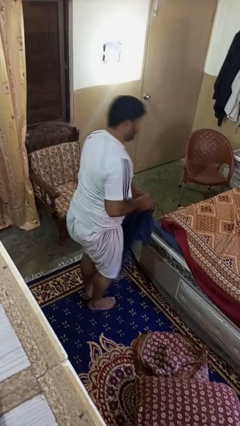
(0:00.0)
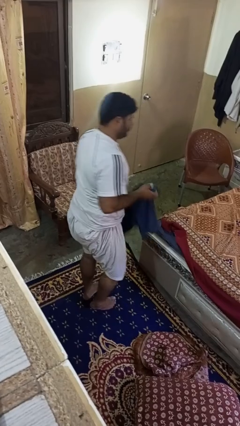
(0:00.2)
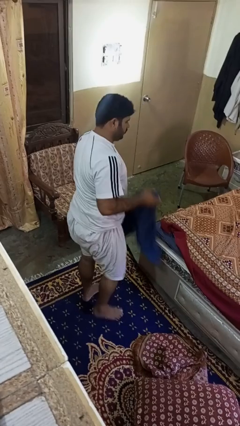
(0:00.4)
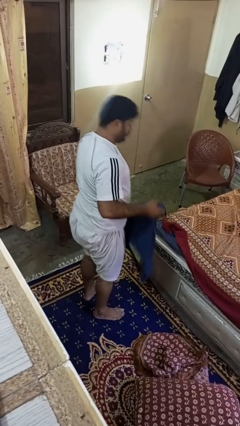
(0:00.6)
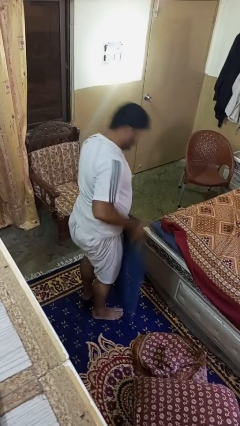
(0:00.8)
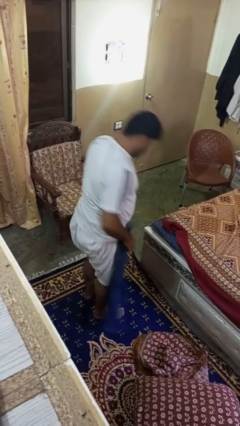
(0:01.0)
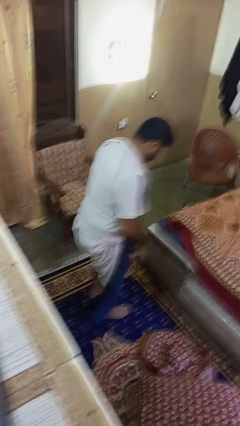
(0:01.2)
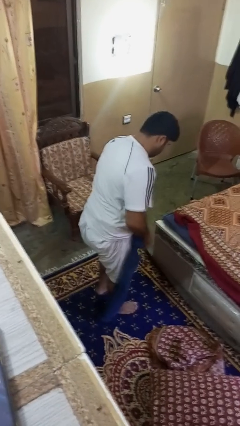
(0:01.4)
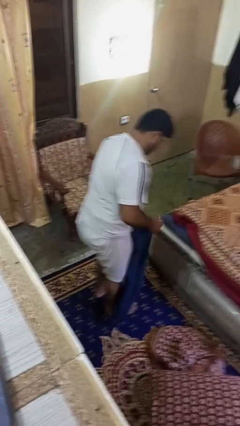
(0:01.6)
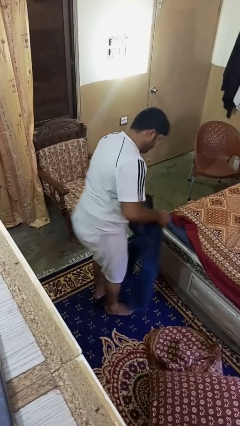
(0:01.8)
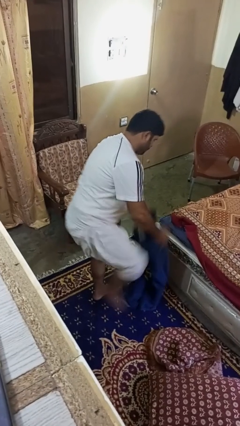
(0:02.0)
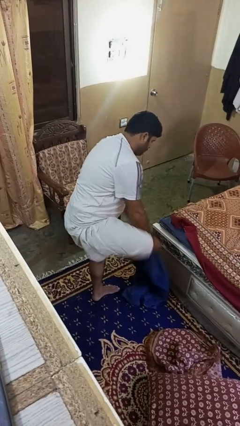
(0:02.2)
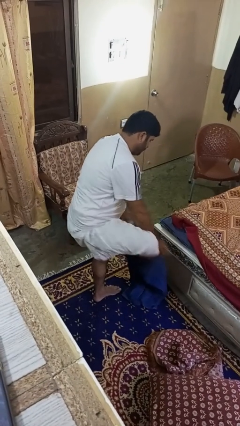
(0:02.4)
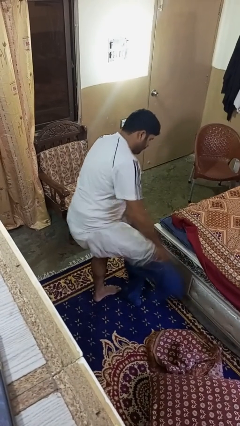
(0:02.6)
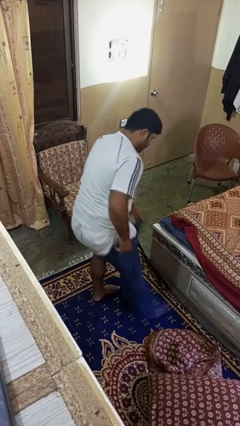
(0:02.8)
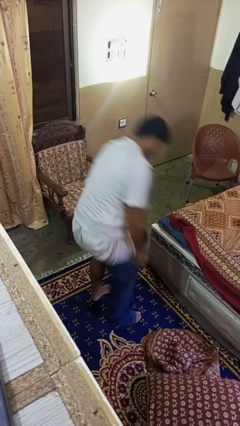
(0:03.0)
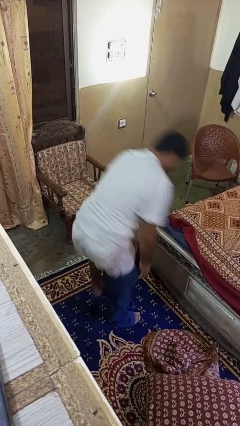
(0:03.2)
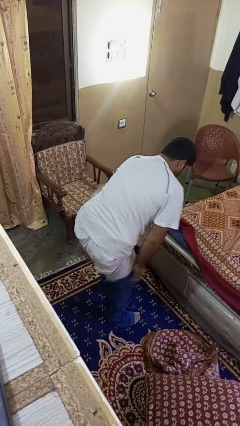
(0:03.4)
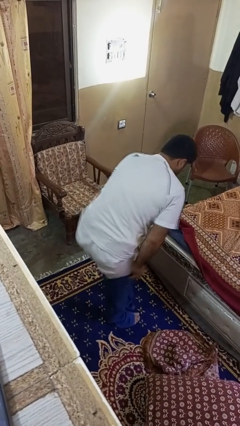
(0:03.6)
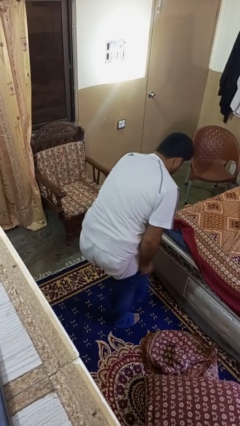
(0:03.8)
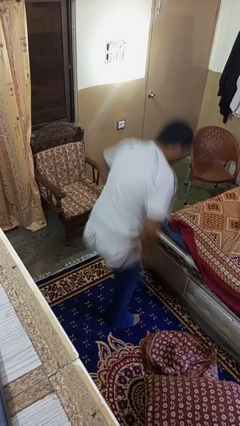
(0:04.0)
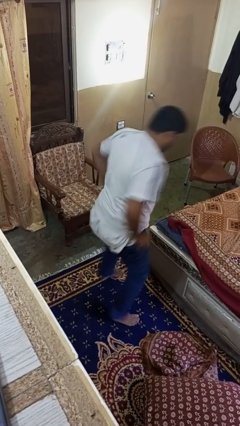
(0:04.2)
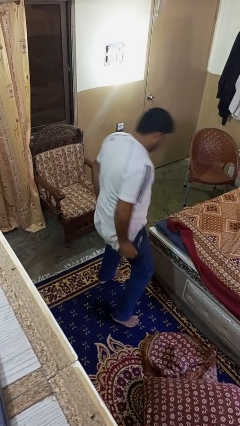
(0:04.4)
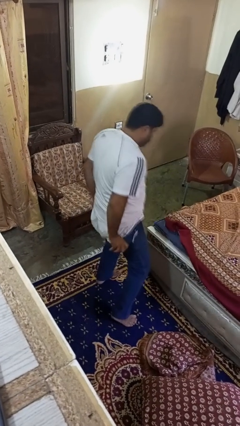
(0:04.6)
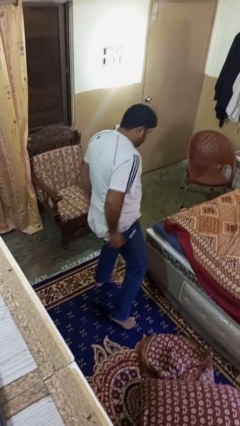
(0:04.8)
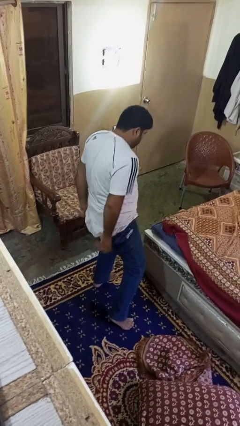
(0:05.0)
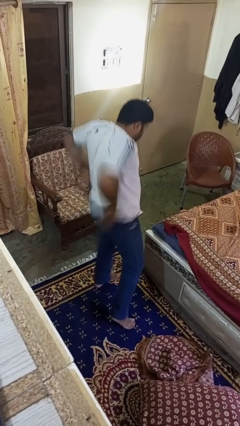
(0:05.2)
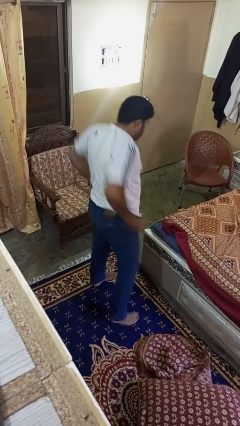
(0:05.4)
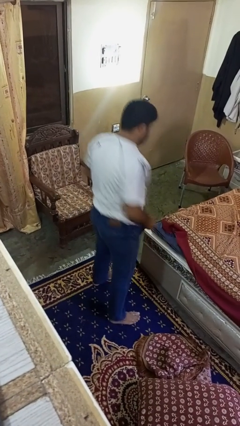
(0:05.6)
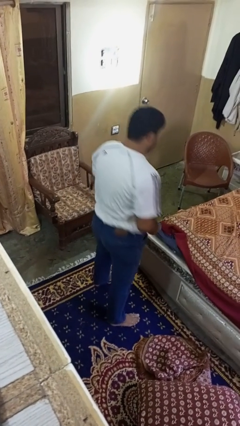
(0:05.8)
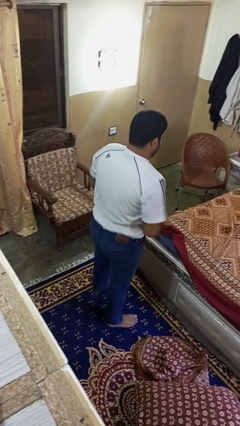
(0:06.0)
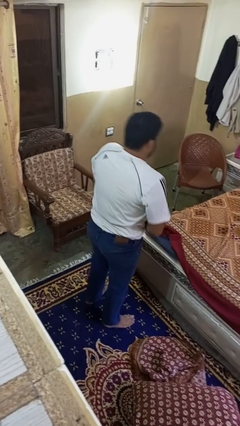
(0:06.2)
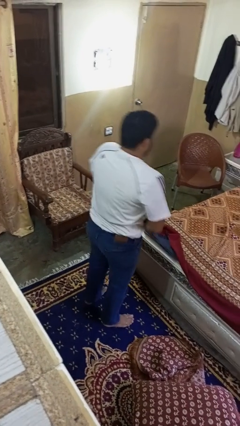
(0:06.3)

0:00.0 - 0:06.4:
person puts on pants

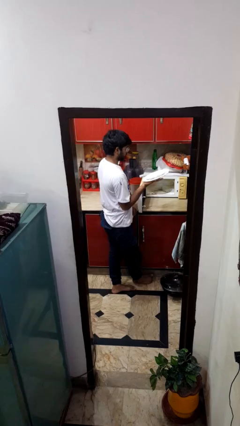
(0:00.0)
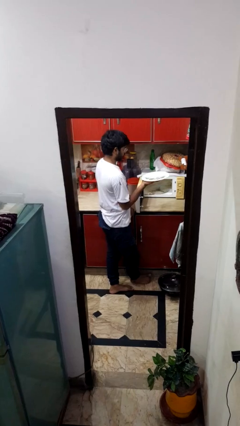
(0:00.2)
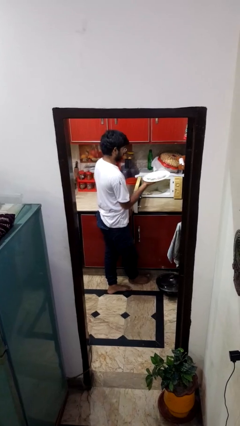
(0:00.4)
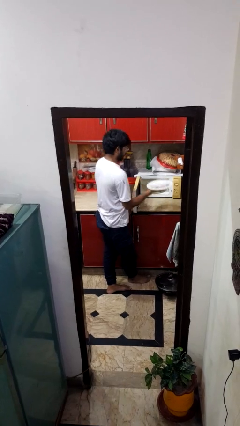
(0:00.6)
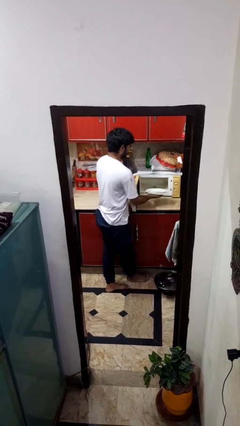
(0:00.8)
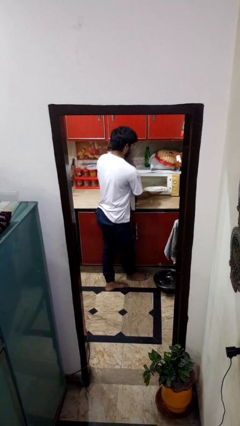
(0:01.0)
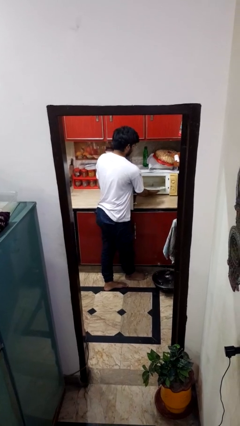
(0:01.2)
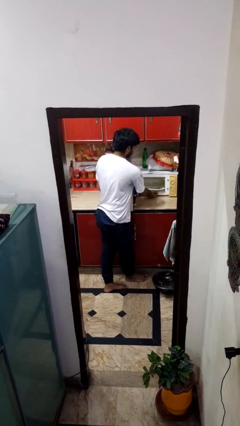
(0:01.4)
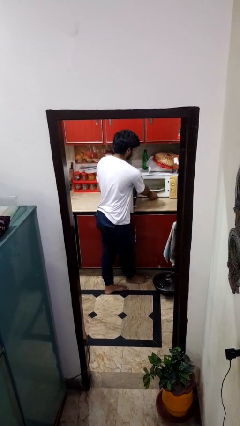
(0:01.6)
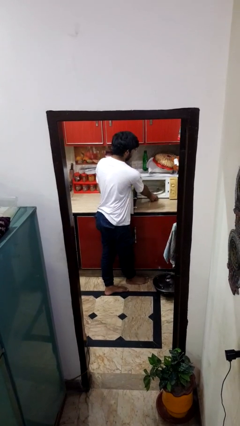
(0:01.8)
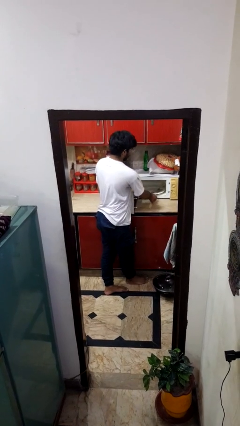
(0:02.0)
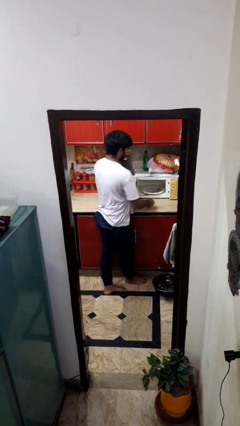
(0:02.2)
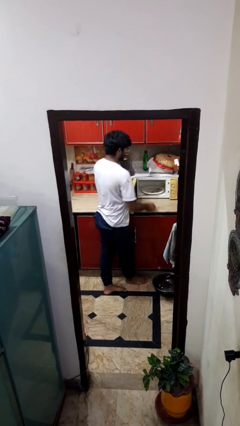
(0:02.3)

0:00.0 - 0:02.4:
person puts object into oven

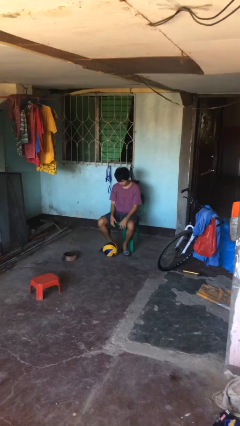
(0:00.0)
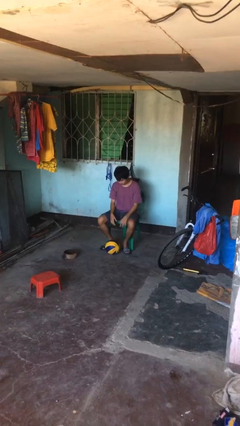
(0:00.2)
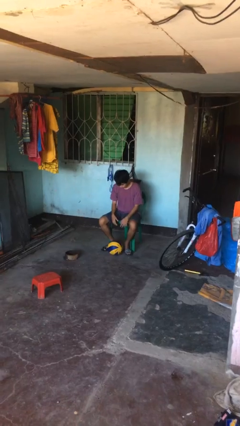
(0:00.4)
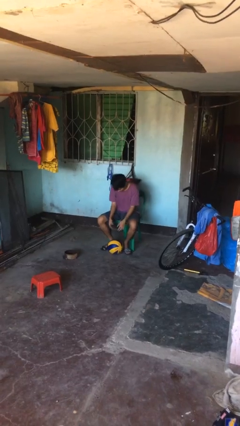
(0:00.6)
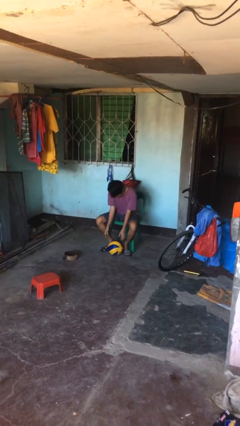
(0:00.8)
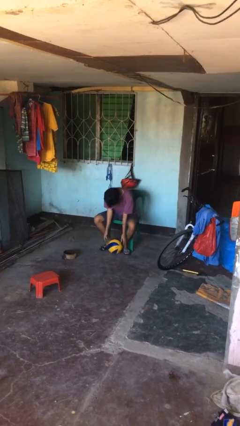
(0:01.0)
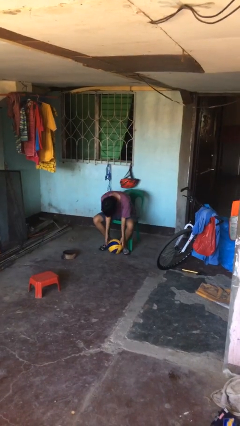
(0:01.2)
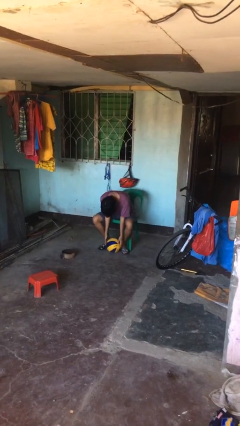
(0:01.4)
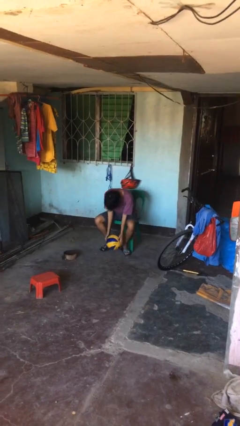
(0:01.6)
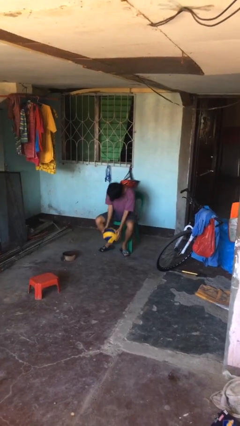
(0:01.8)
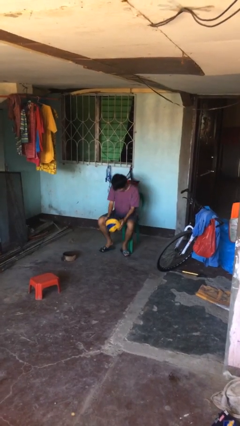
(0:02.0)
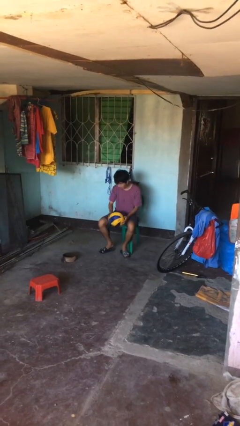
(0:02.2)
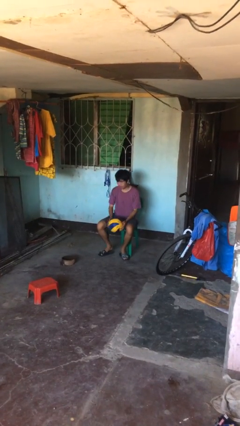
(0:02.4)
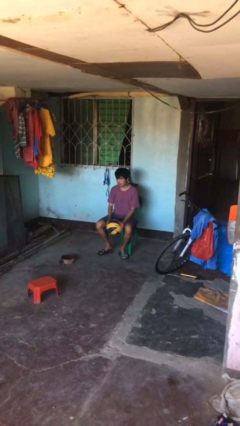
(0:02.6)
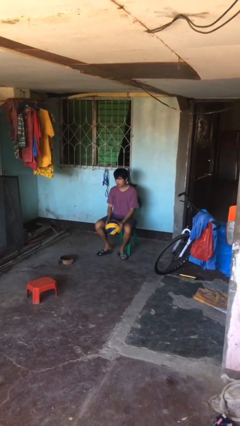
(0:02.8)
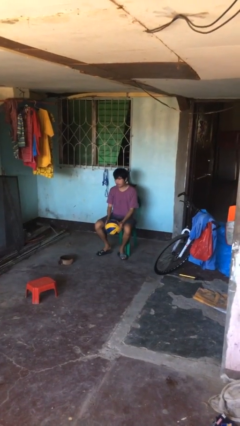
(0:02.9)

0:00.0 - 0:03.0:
person picks up object from floor

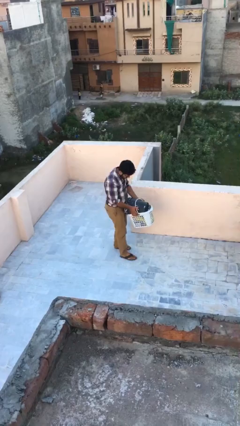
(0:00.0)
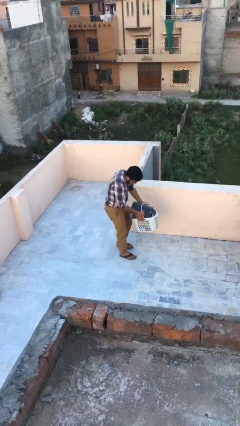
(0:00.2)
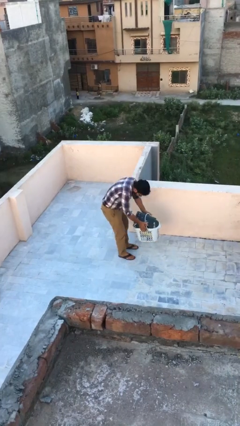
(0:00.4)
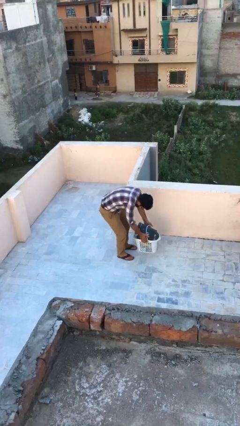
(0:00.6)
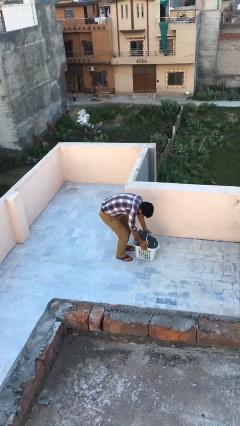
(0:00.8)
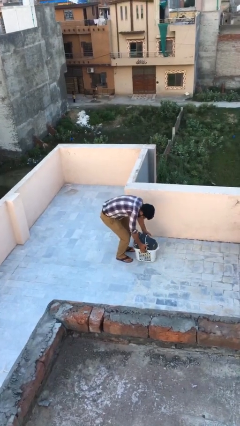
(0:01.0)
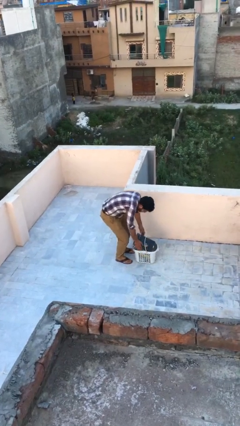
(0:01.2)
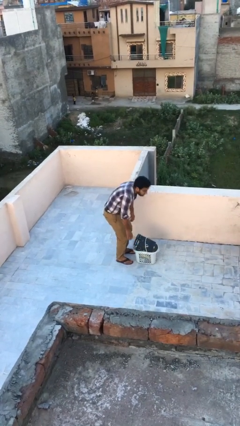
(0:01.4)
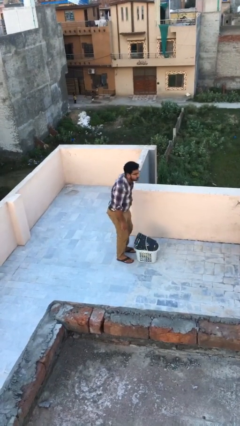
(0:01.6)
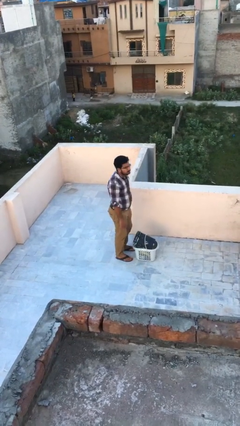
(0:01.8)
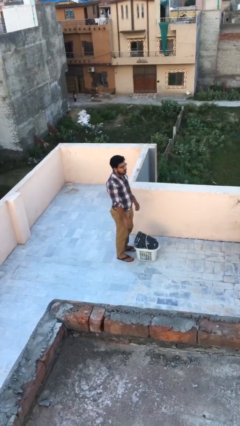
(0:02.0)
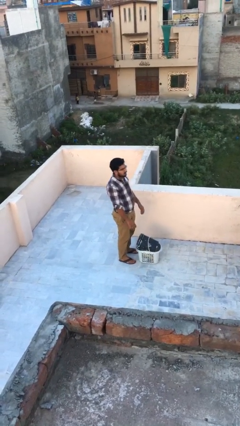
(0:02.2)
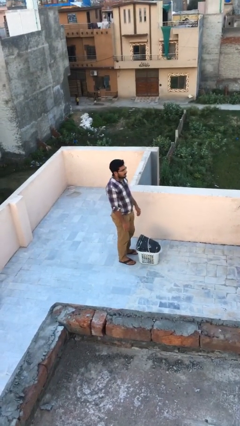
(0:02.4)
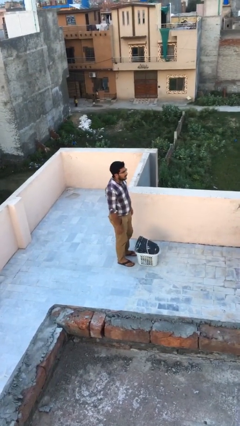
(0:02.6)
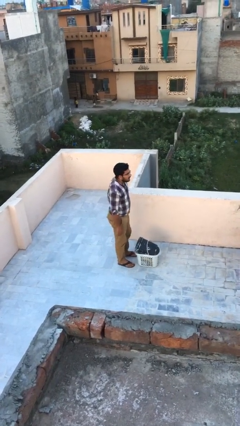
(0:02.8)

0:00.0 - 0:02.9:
person puts down object on floor

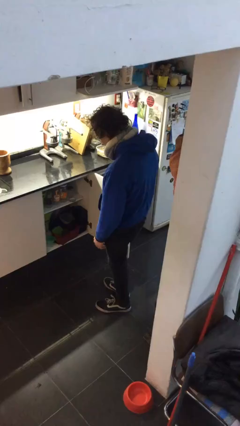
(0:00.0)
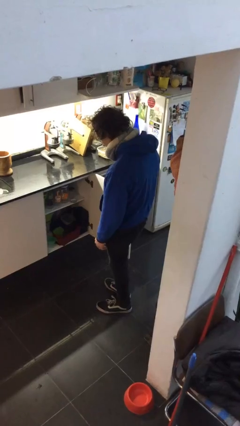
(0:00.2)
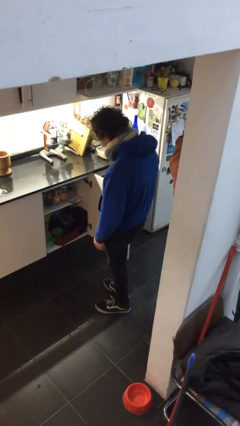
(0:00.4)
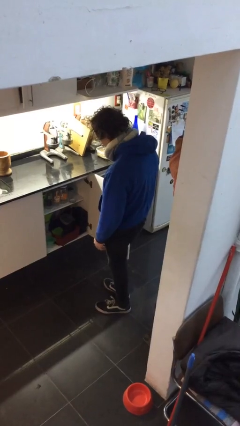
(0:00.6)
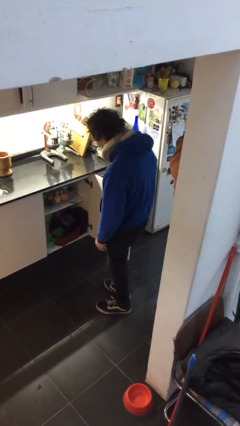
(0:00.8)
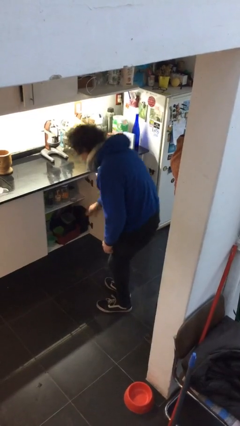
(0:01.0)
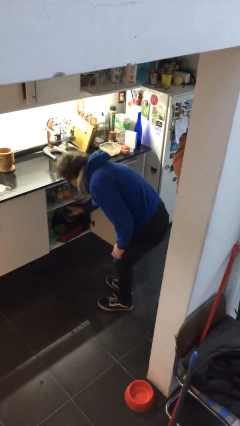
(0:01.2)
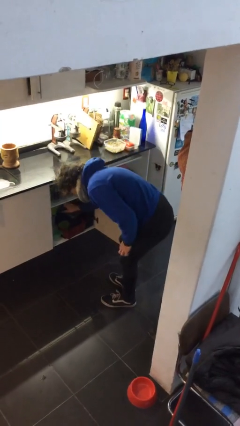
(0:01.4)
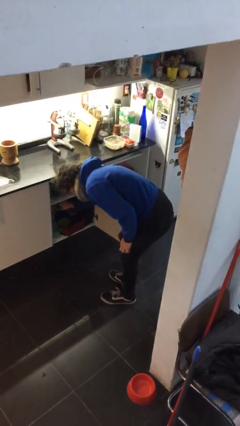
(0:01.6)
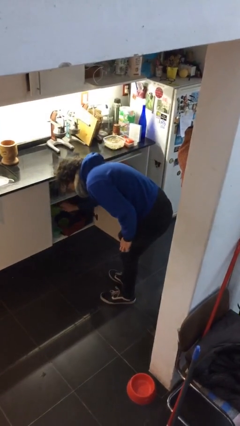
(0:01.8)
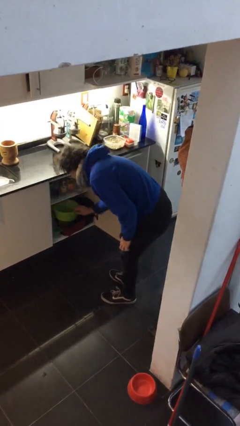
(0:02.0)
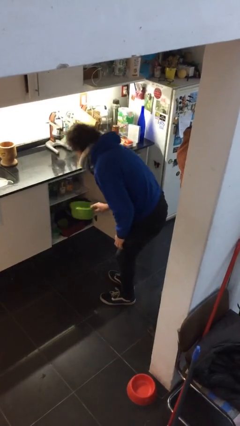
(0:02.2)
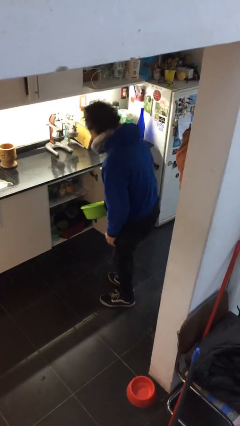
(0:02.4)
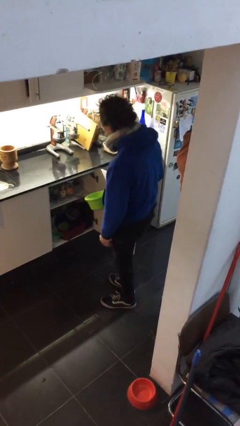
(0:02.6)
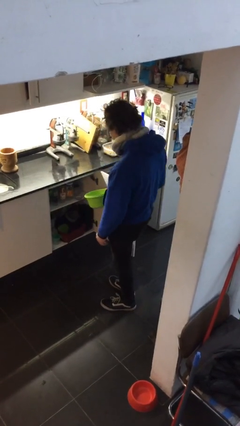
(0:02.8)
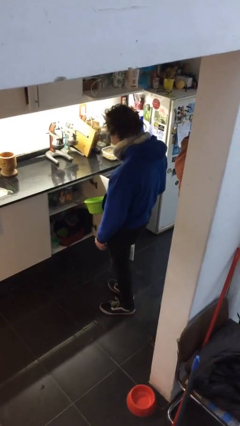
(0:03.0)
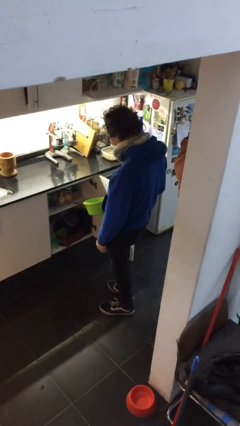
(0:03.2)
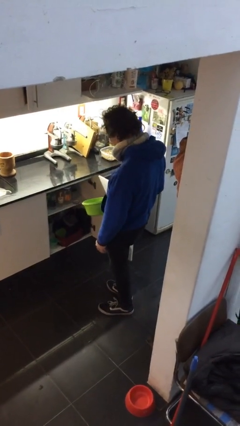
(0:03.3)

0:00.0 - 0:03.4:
person picks up object from cabinet
